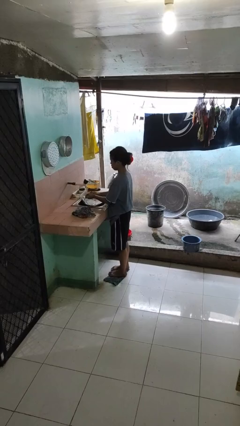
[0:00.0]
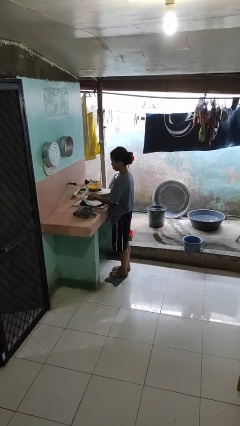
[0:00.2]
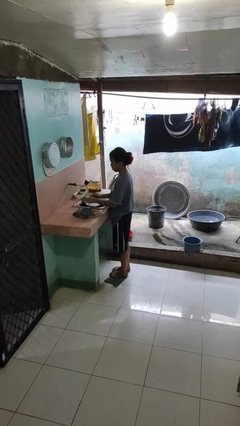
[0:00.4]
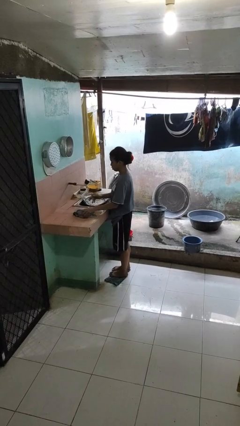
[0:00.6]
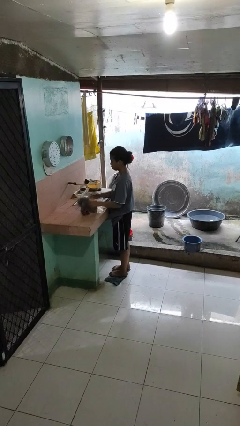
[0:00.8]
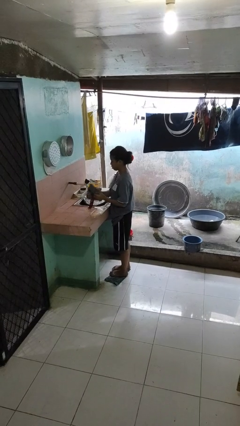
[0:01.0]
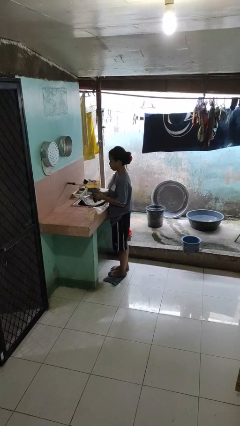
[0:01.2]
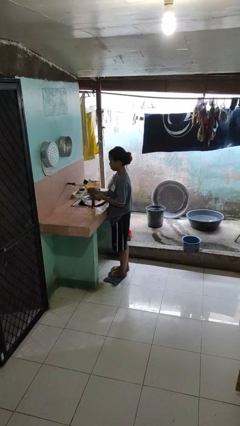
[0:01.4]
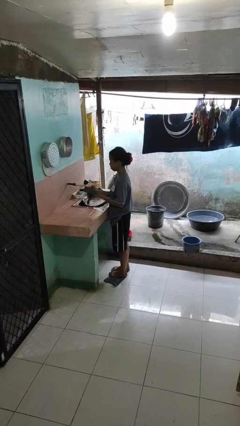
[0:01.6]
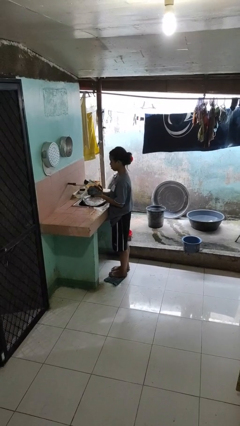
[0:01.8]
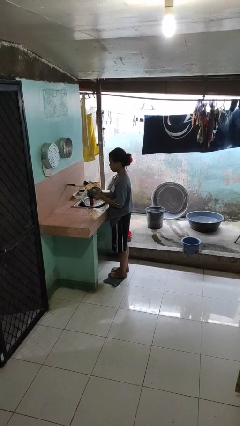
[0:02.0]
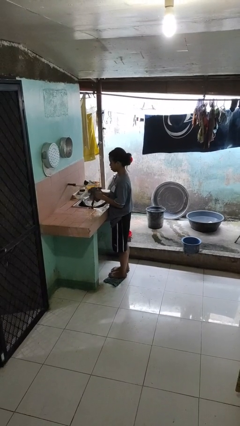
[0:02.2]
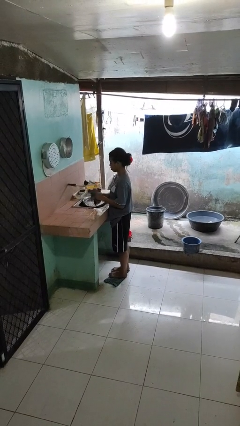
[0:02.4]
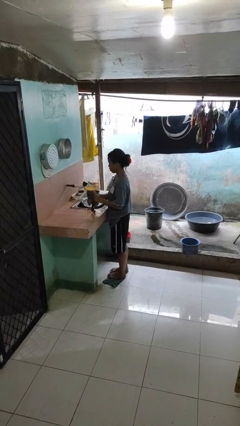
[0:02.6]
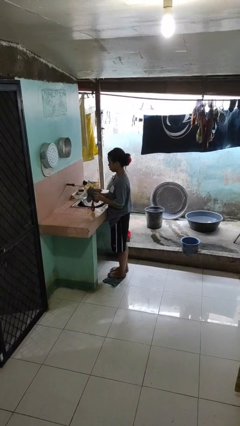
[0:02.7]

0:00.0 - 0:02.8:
person dries hands with towel

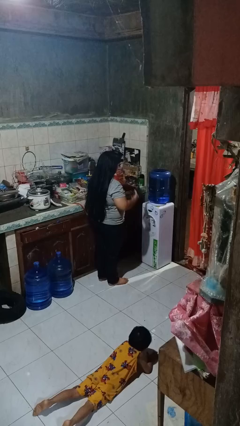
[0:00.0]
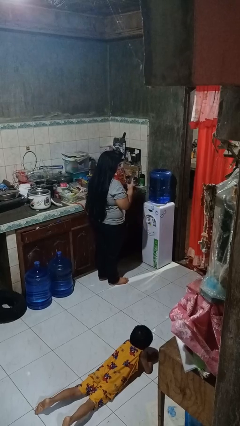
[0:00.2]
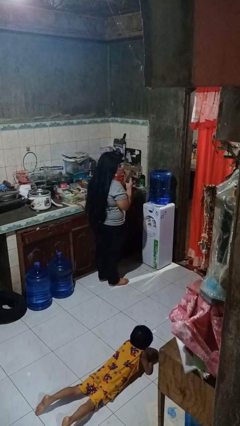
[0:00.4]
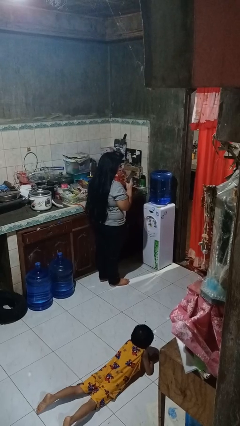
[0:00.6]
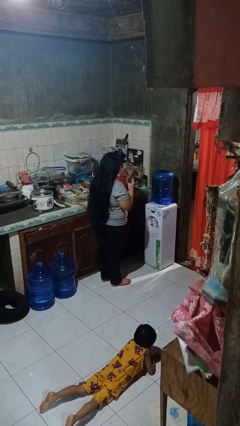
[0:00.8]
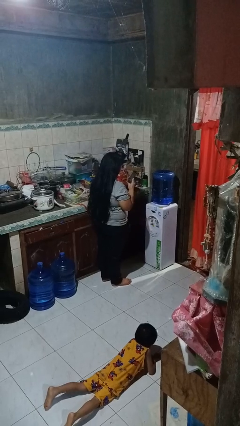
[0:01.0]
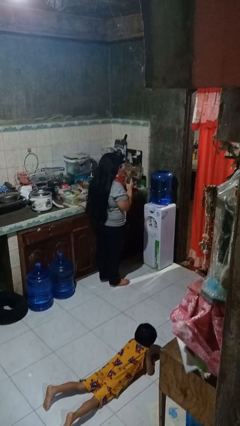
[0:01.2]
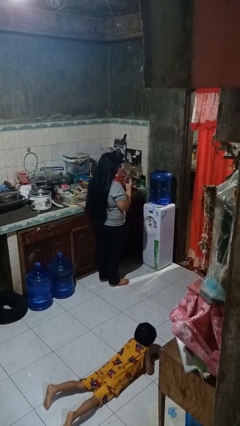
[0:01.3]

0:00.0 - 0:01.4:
person takes phone from pocket

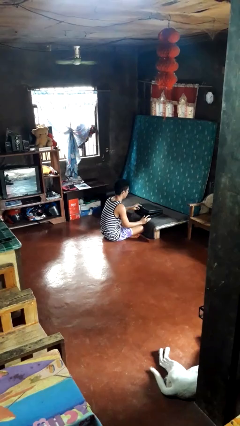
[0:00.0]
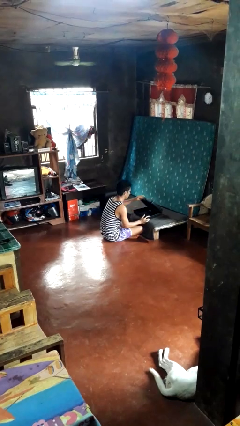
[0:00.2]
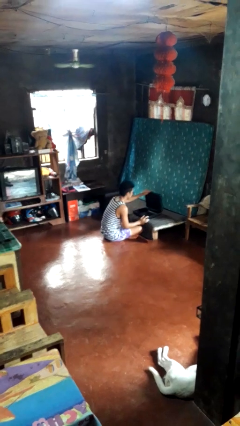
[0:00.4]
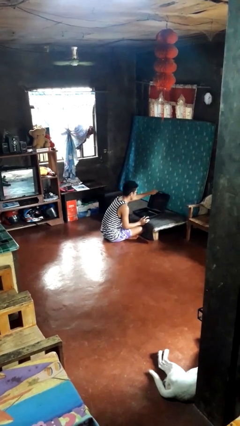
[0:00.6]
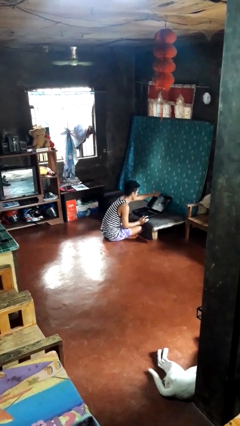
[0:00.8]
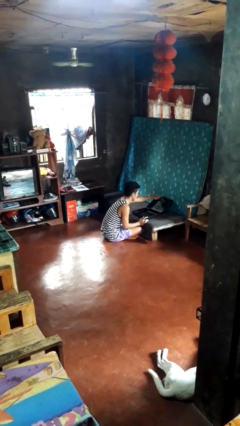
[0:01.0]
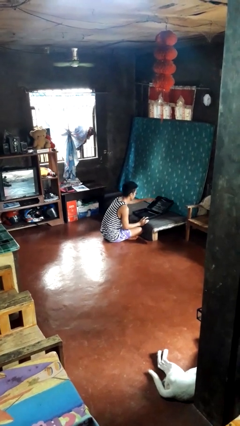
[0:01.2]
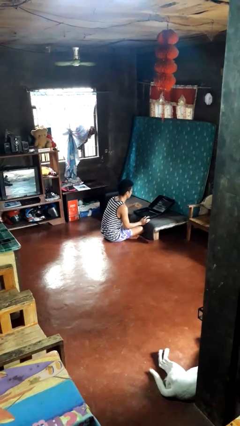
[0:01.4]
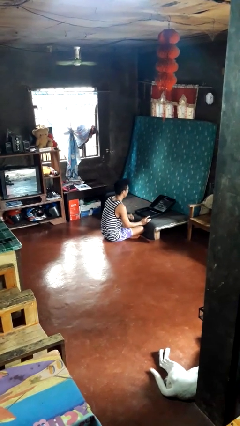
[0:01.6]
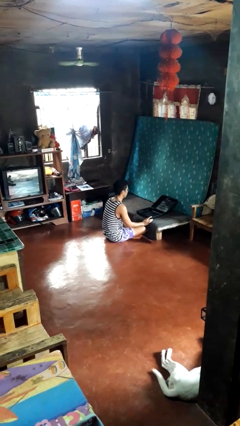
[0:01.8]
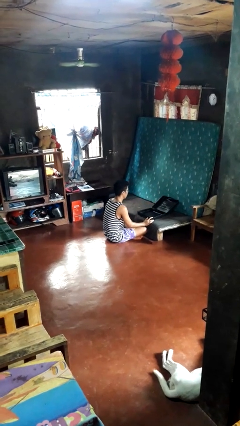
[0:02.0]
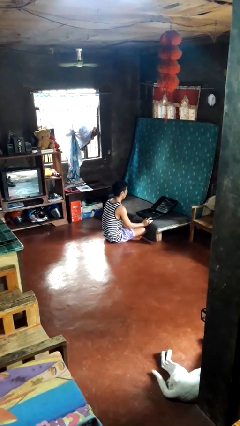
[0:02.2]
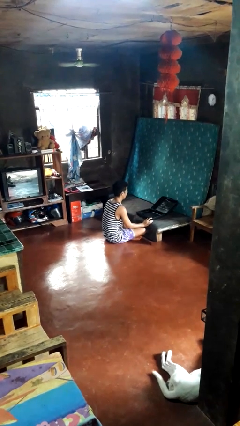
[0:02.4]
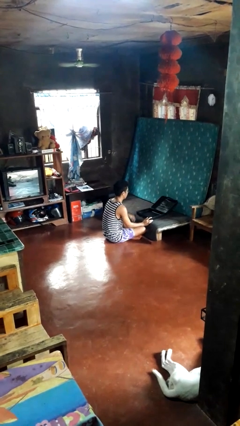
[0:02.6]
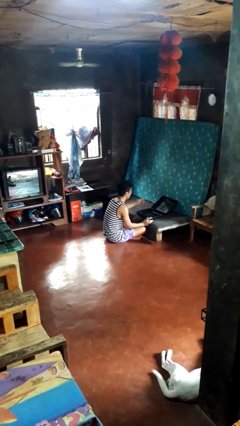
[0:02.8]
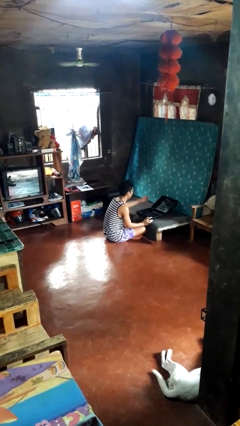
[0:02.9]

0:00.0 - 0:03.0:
person opens suitcase

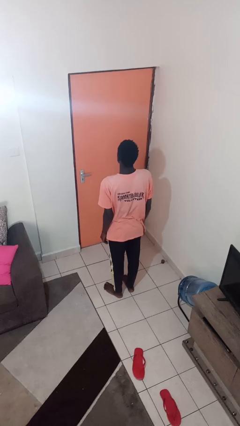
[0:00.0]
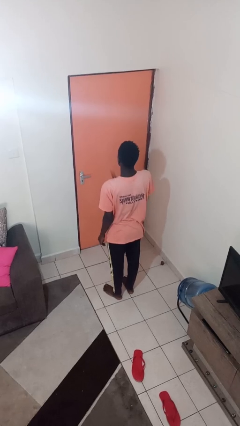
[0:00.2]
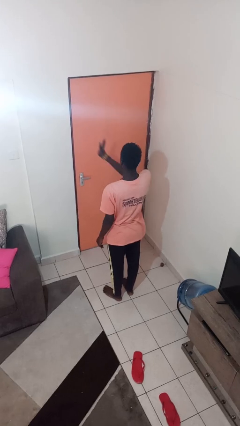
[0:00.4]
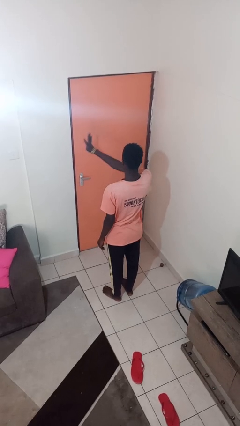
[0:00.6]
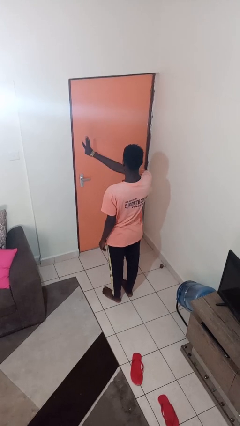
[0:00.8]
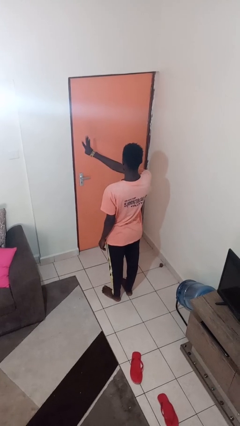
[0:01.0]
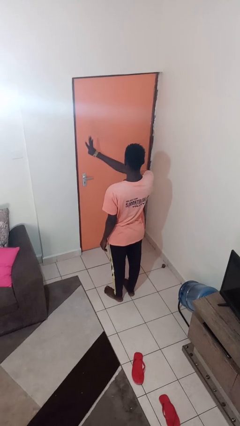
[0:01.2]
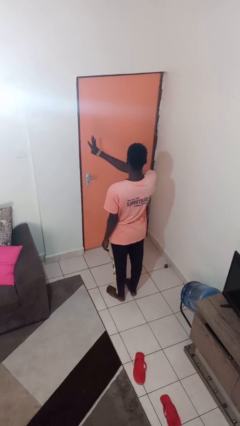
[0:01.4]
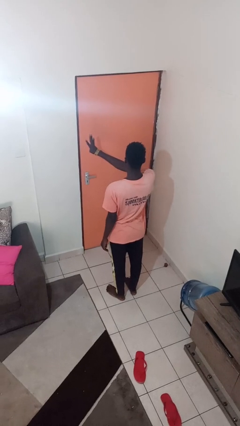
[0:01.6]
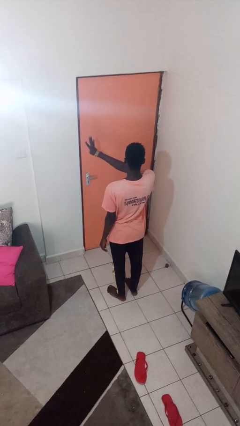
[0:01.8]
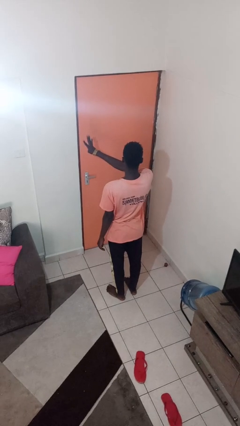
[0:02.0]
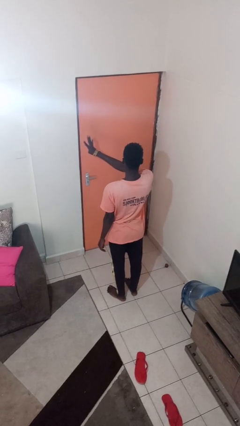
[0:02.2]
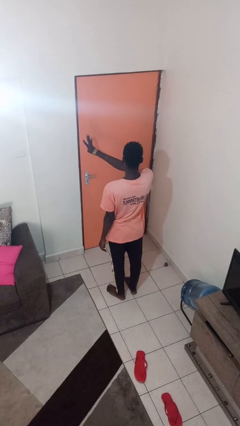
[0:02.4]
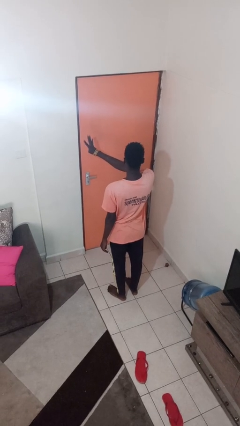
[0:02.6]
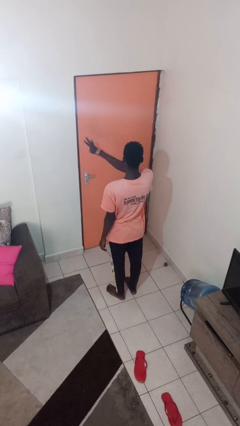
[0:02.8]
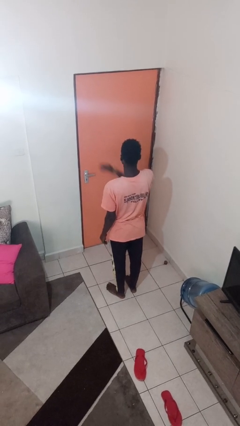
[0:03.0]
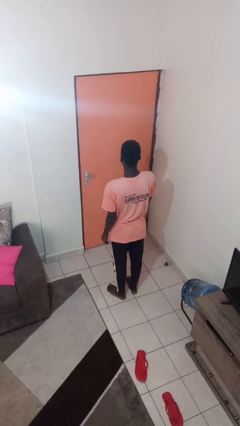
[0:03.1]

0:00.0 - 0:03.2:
person gestures number four

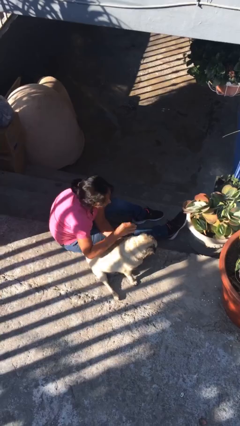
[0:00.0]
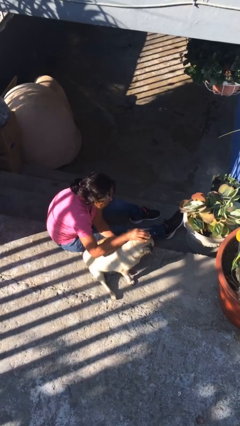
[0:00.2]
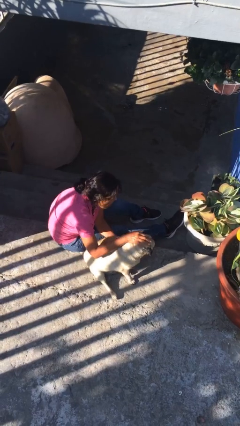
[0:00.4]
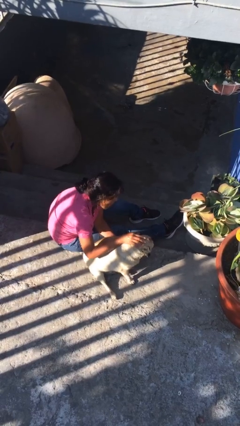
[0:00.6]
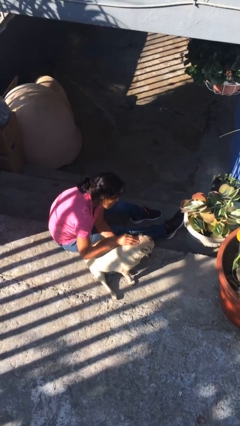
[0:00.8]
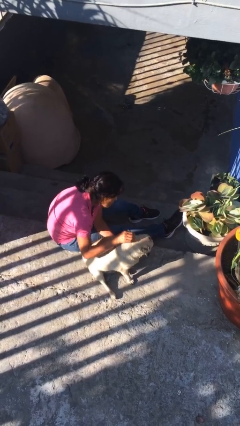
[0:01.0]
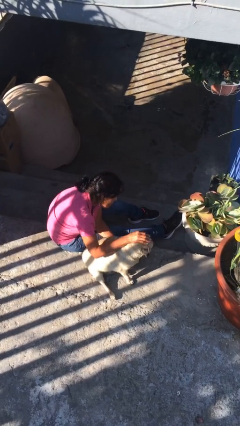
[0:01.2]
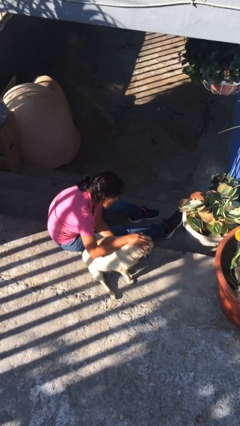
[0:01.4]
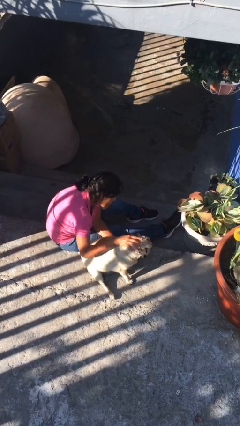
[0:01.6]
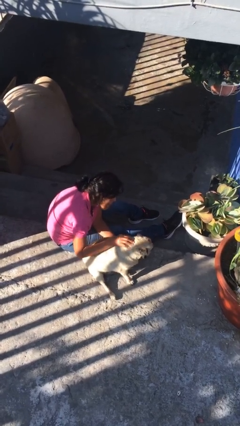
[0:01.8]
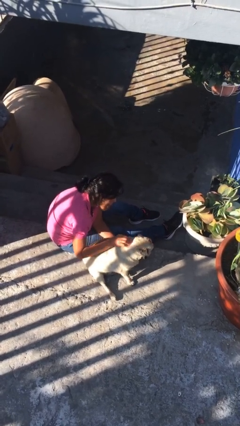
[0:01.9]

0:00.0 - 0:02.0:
person pets dog

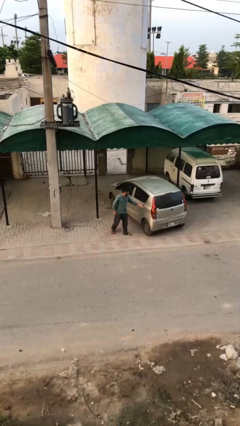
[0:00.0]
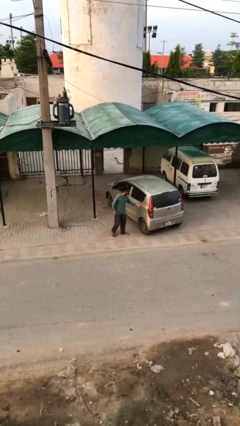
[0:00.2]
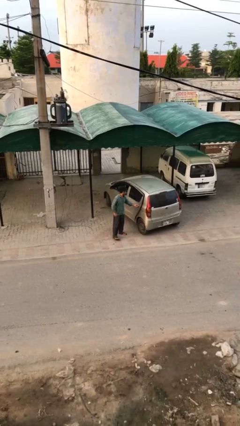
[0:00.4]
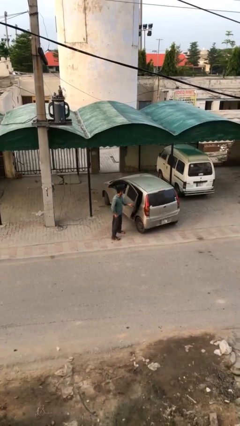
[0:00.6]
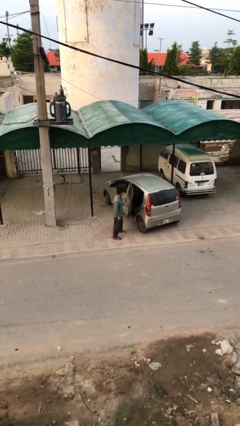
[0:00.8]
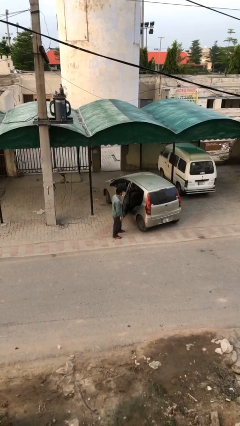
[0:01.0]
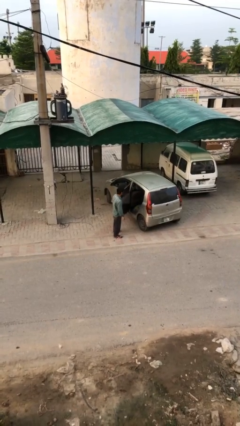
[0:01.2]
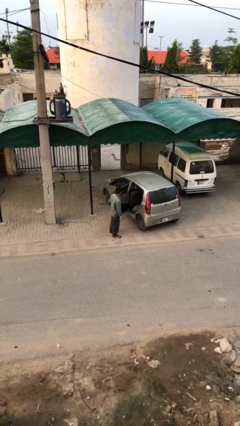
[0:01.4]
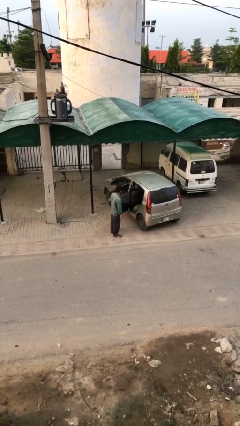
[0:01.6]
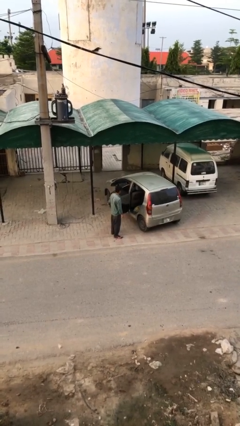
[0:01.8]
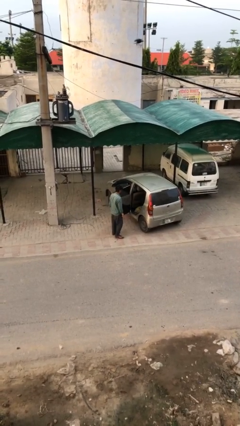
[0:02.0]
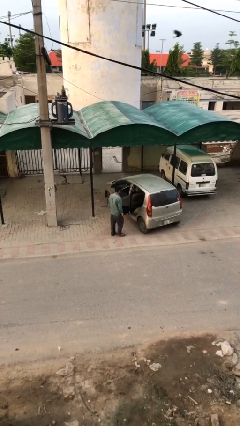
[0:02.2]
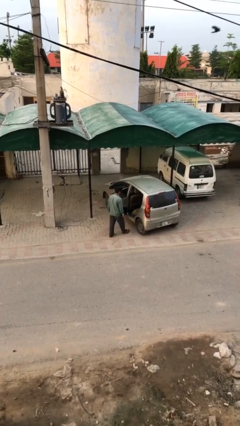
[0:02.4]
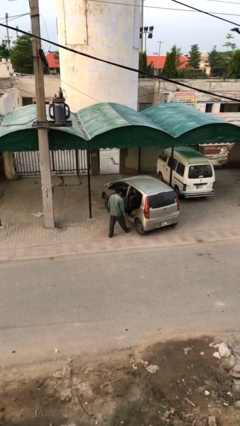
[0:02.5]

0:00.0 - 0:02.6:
person opens car door

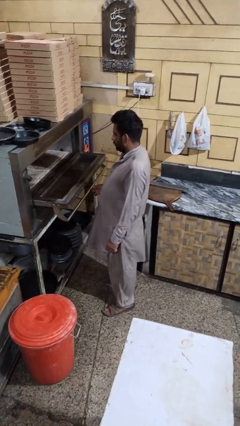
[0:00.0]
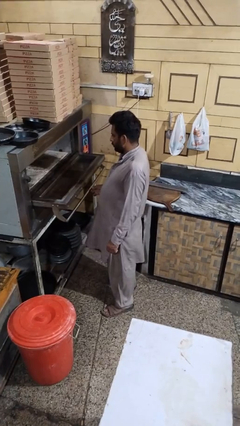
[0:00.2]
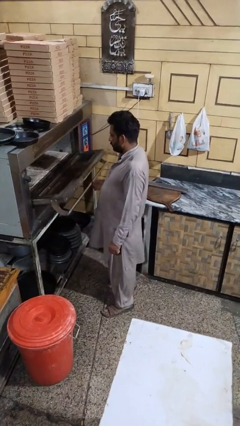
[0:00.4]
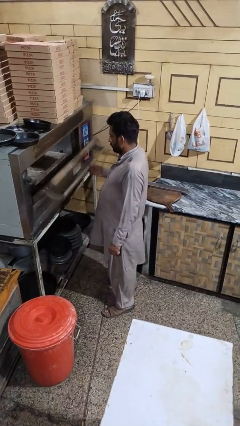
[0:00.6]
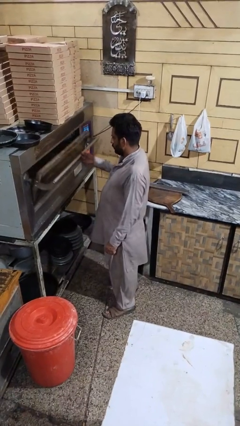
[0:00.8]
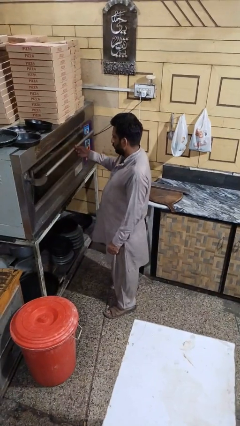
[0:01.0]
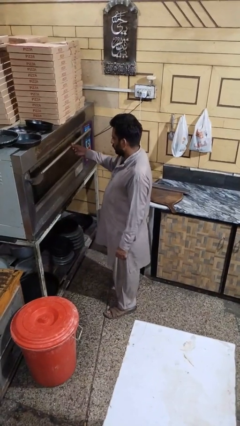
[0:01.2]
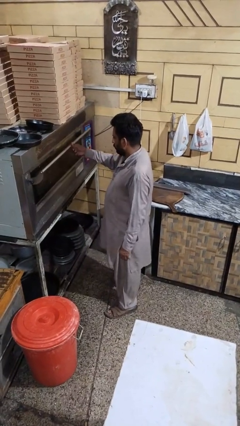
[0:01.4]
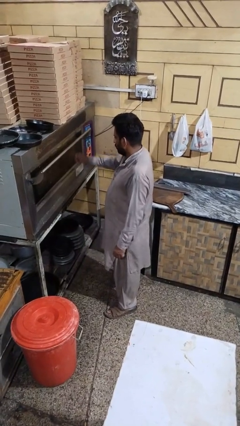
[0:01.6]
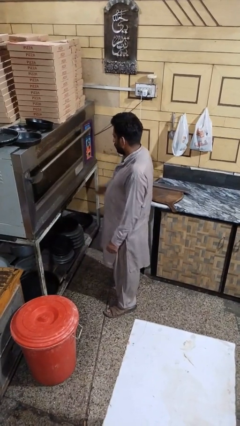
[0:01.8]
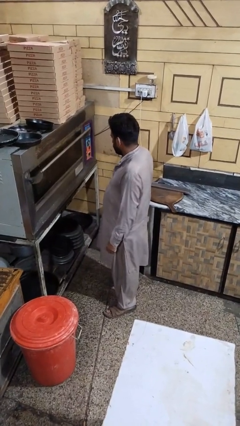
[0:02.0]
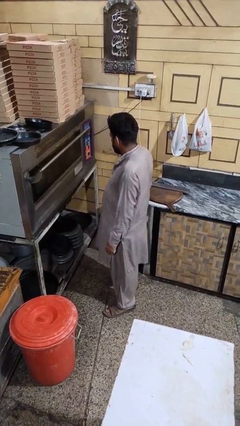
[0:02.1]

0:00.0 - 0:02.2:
person closes microwave
